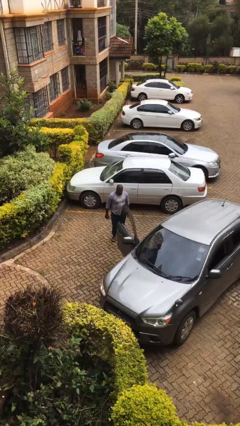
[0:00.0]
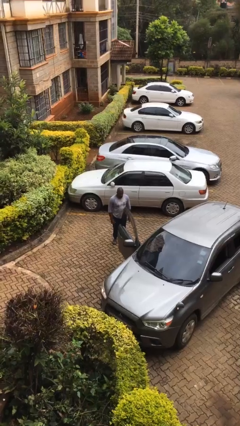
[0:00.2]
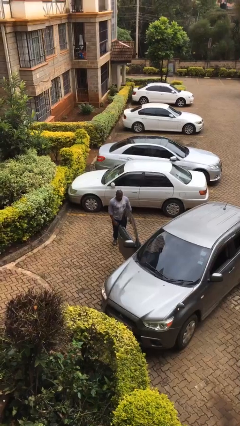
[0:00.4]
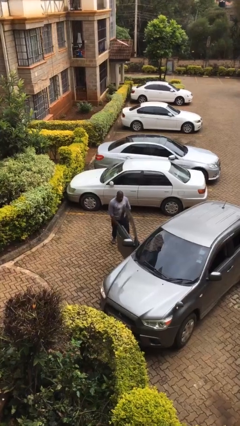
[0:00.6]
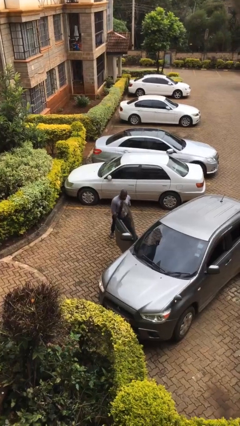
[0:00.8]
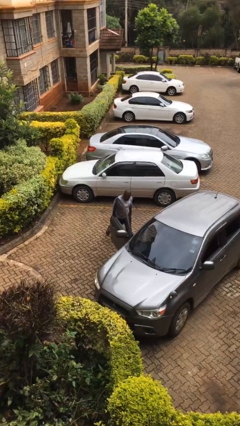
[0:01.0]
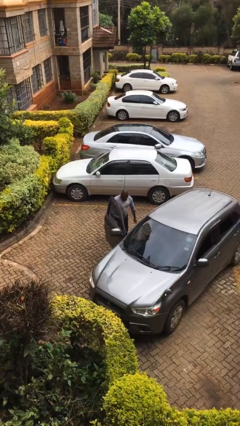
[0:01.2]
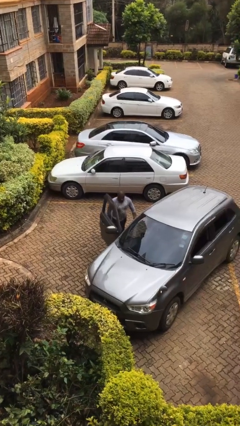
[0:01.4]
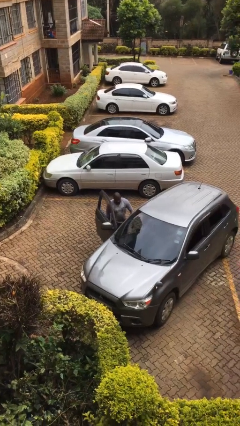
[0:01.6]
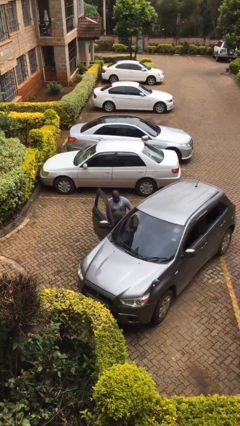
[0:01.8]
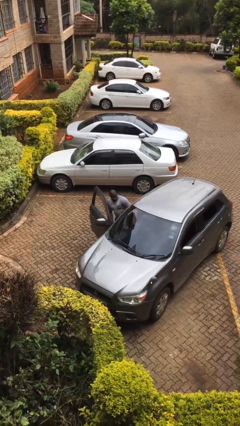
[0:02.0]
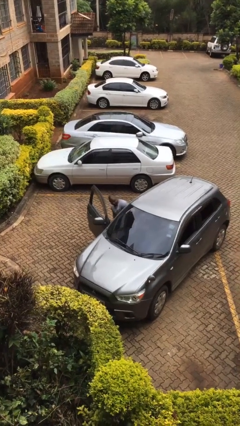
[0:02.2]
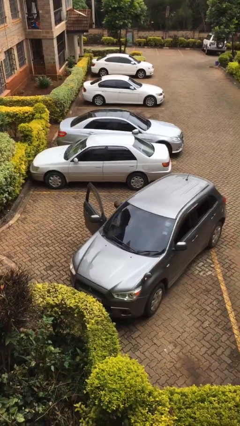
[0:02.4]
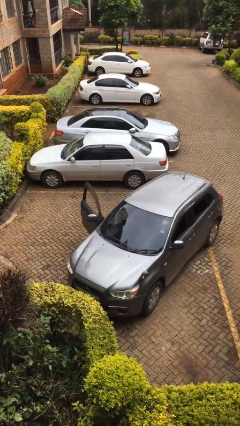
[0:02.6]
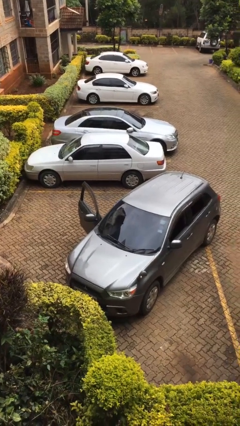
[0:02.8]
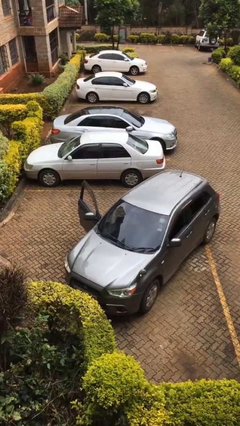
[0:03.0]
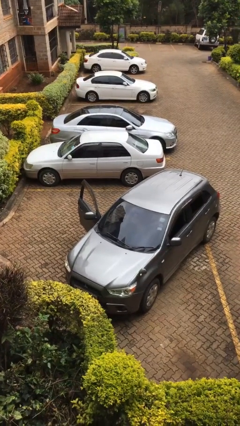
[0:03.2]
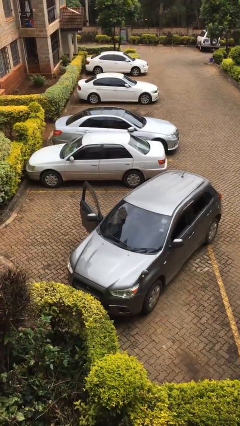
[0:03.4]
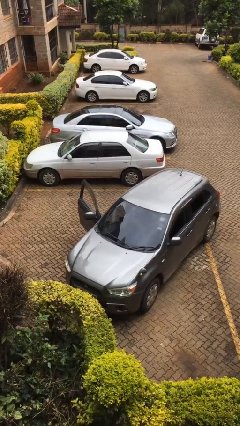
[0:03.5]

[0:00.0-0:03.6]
person enters car

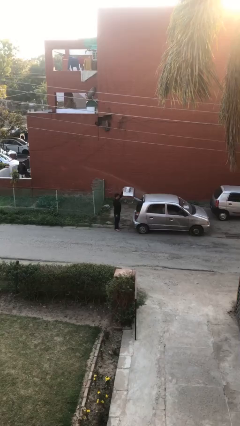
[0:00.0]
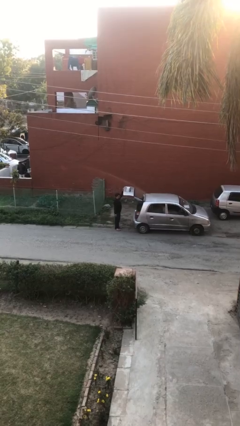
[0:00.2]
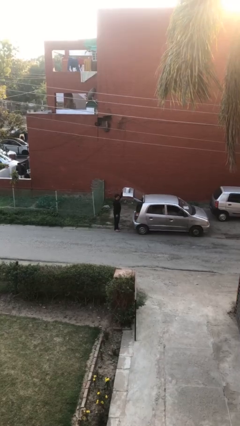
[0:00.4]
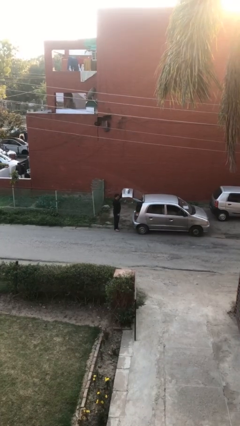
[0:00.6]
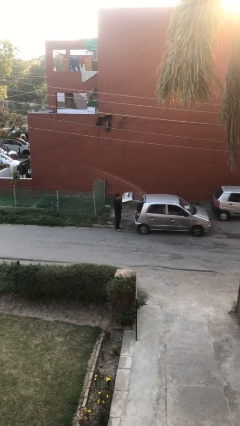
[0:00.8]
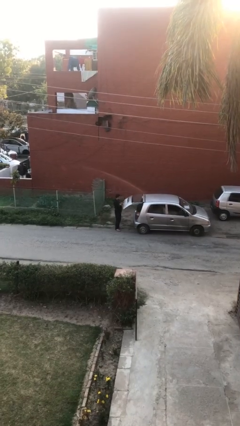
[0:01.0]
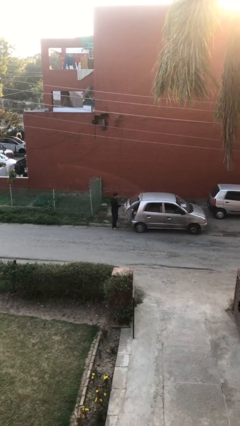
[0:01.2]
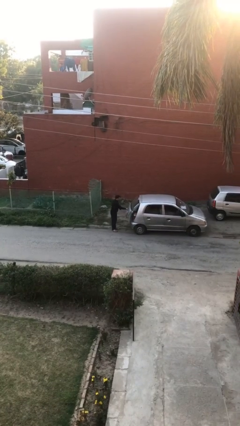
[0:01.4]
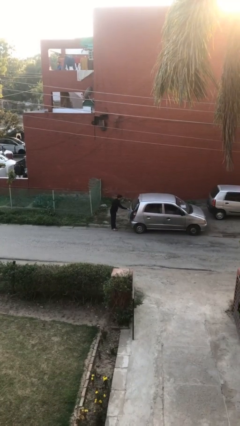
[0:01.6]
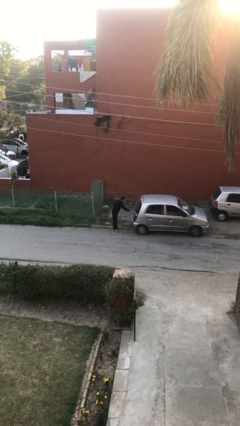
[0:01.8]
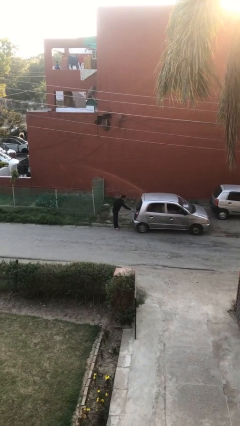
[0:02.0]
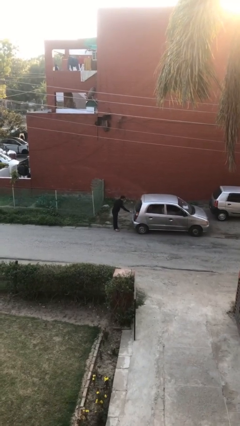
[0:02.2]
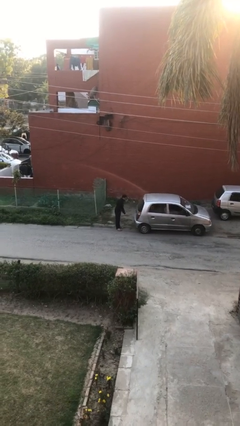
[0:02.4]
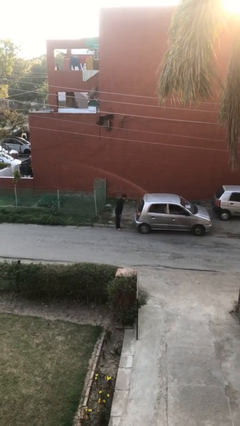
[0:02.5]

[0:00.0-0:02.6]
person closes car trunk

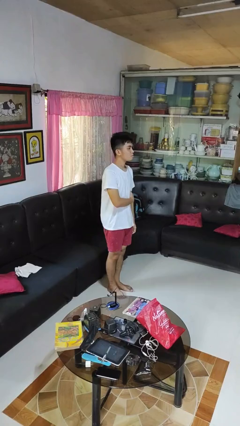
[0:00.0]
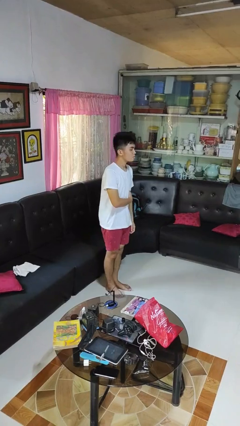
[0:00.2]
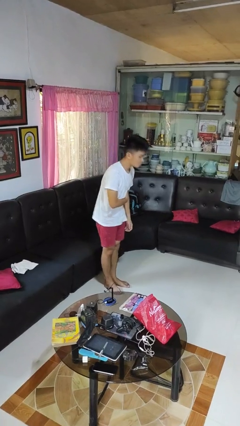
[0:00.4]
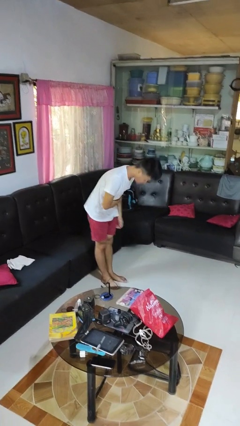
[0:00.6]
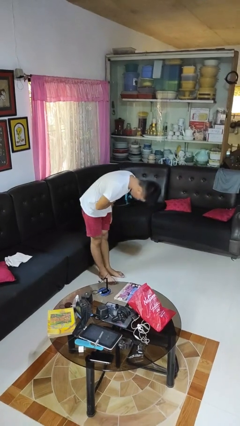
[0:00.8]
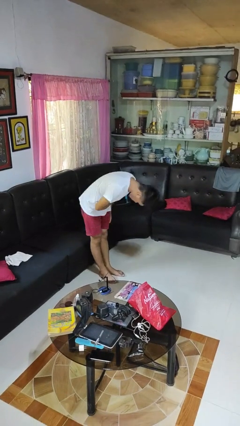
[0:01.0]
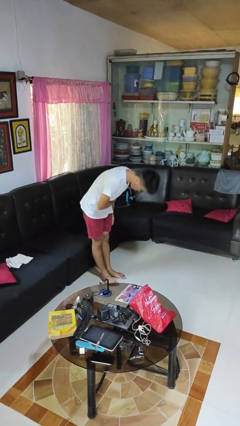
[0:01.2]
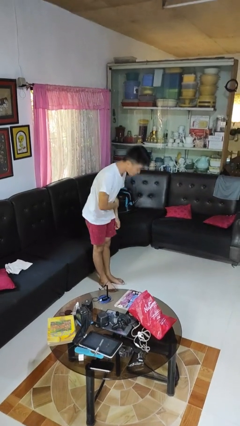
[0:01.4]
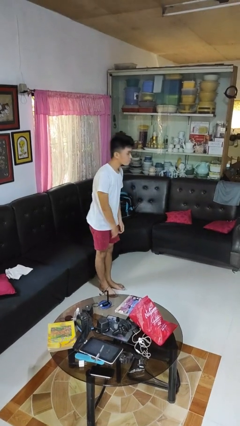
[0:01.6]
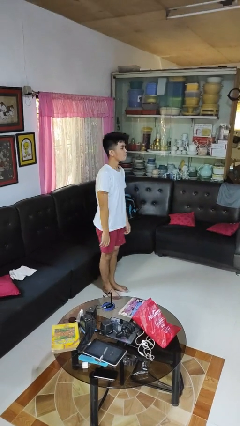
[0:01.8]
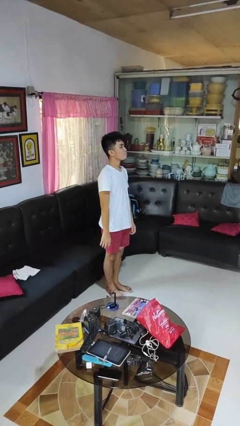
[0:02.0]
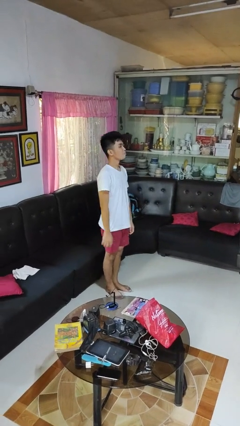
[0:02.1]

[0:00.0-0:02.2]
person bows

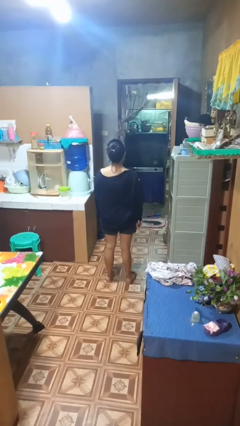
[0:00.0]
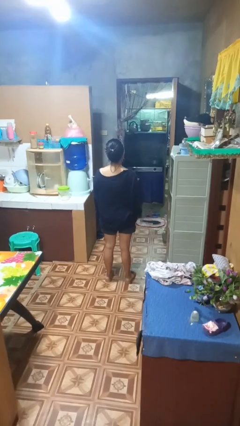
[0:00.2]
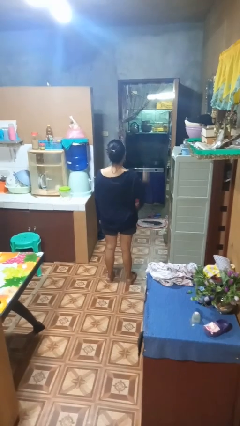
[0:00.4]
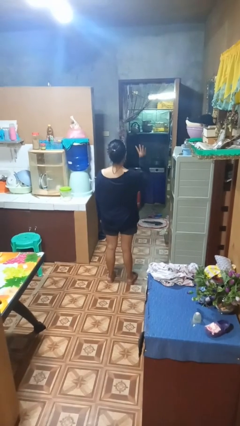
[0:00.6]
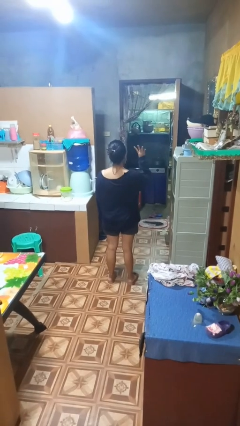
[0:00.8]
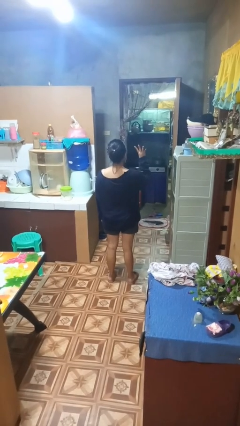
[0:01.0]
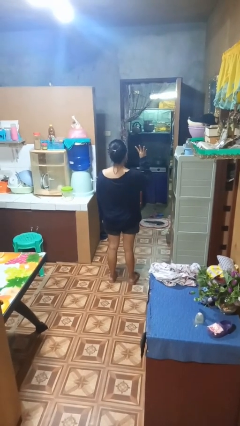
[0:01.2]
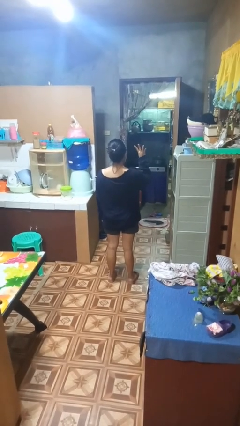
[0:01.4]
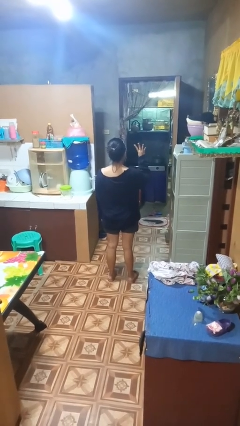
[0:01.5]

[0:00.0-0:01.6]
person gestures number four

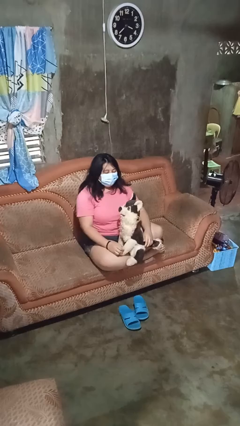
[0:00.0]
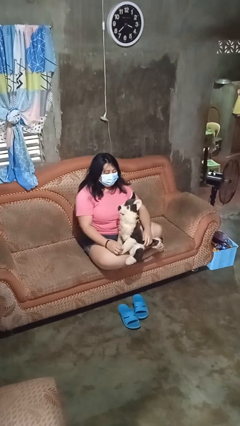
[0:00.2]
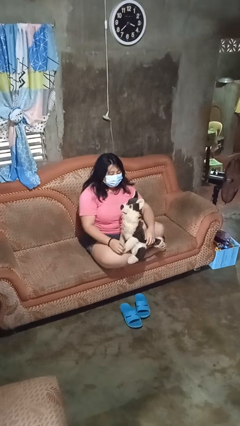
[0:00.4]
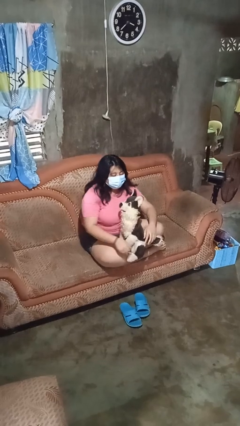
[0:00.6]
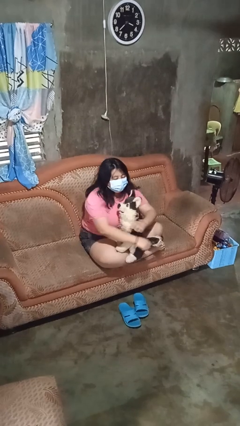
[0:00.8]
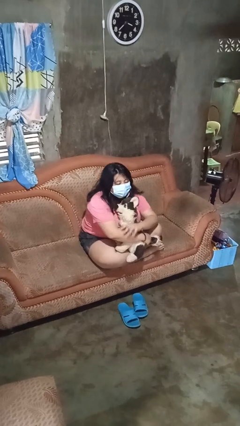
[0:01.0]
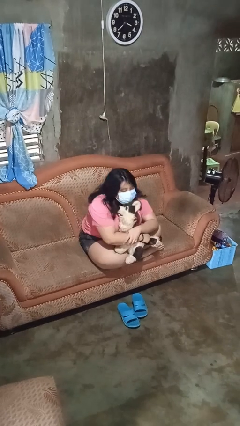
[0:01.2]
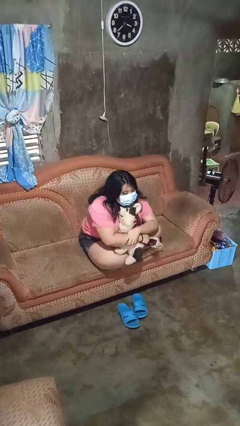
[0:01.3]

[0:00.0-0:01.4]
person hugs stuffed animal

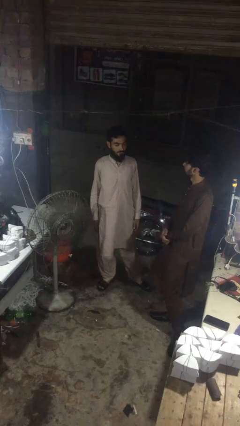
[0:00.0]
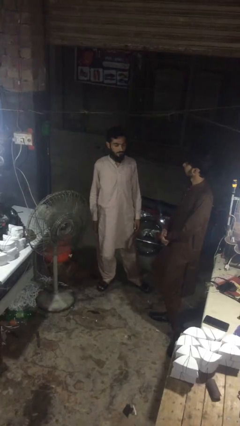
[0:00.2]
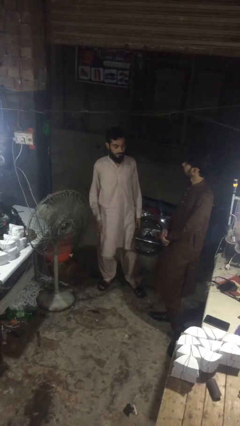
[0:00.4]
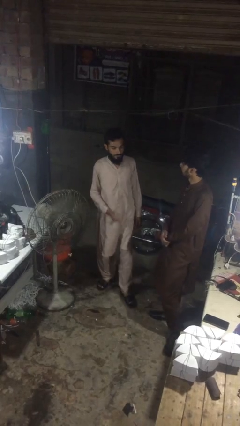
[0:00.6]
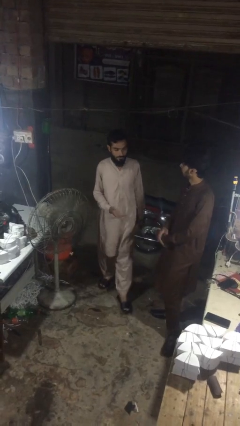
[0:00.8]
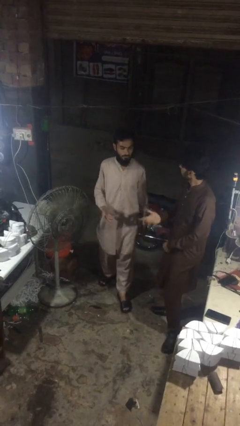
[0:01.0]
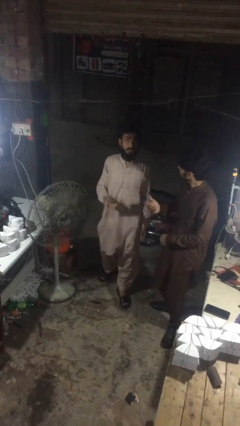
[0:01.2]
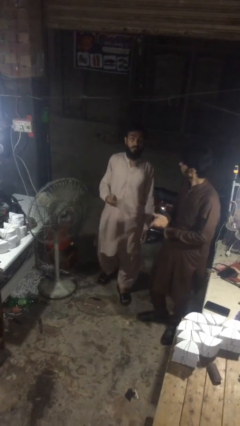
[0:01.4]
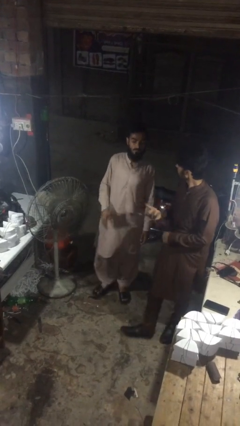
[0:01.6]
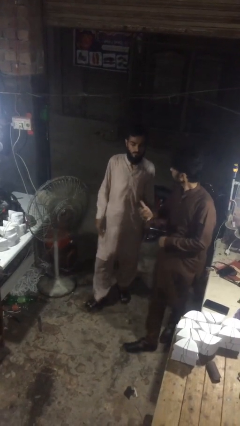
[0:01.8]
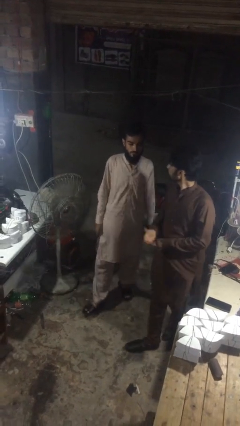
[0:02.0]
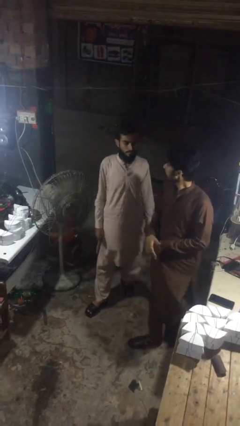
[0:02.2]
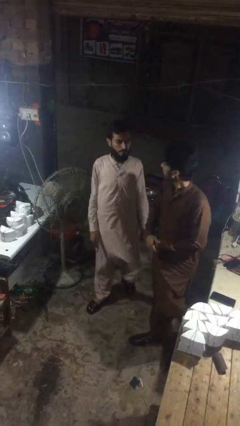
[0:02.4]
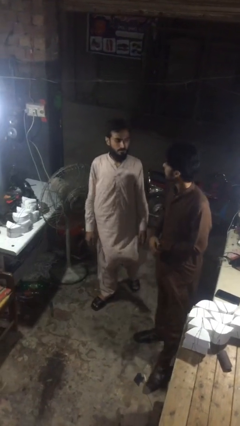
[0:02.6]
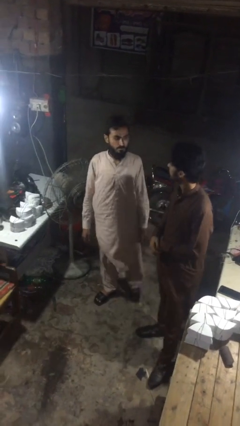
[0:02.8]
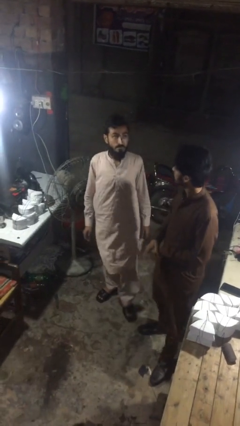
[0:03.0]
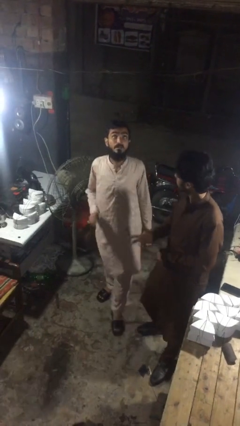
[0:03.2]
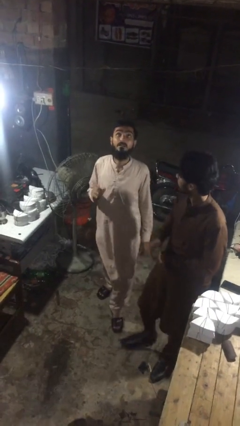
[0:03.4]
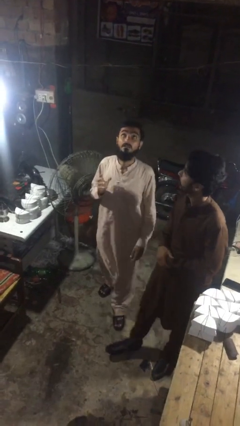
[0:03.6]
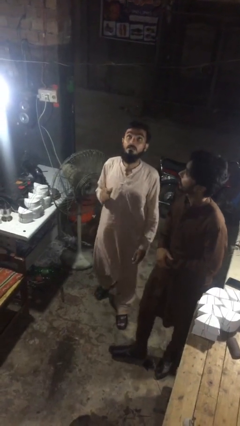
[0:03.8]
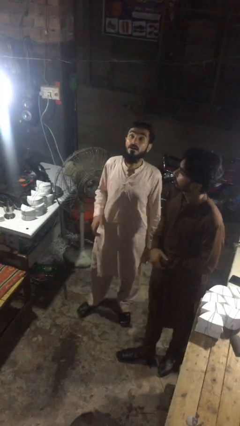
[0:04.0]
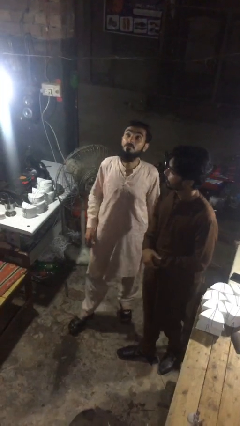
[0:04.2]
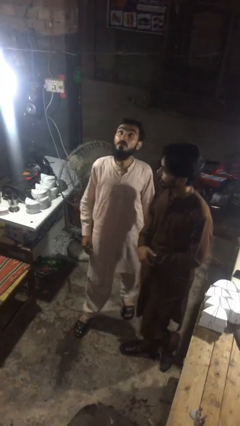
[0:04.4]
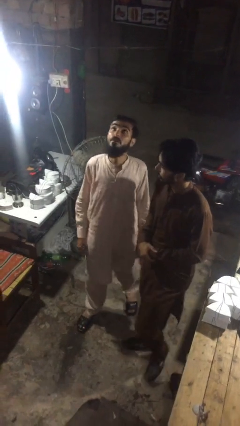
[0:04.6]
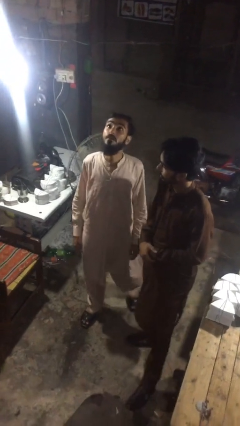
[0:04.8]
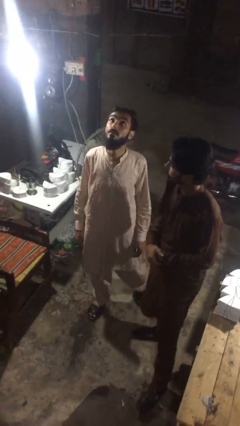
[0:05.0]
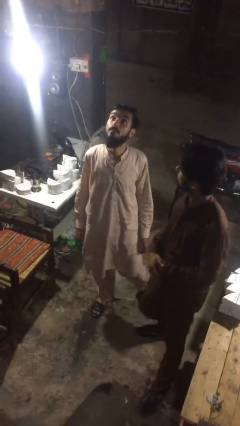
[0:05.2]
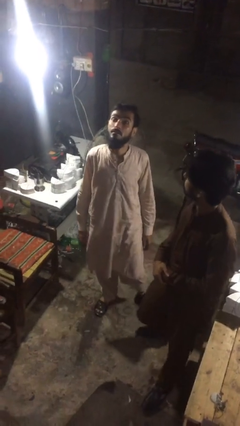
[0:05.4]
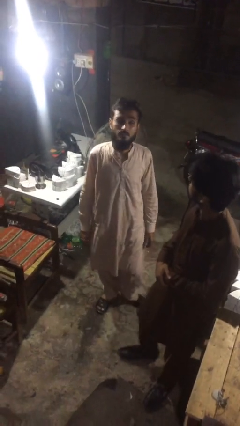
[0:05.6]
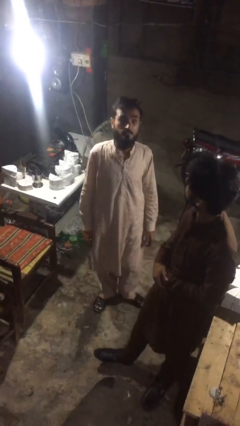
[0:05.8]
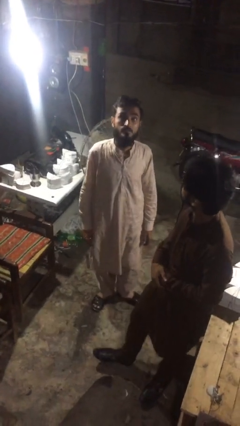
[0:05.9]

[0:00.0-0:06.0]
person talks to person
